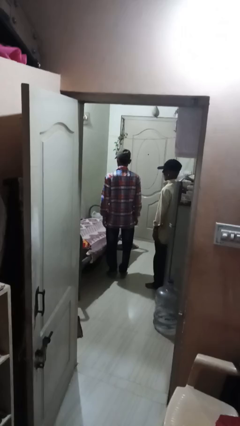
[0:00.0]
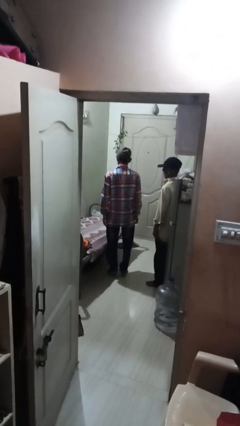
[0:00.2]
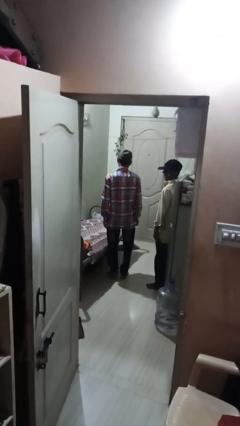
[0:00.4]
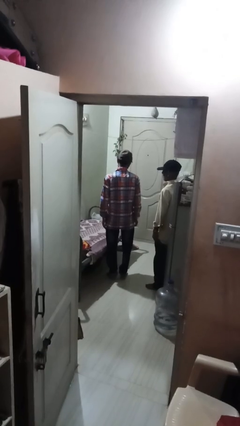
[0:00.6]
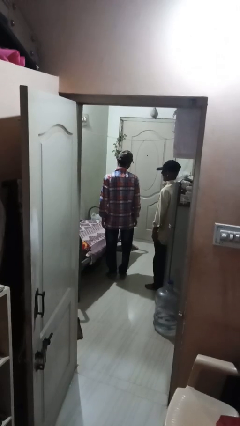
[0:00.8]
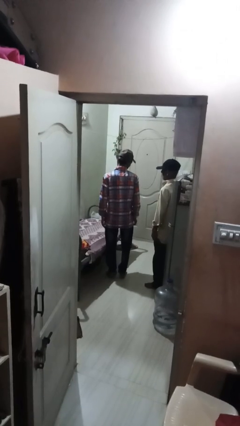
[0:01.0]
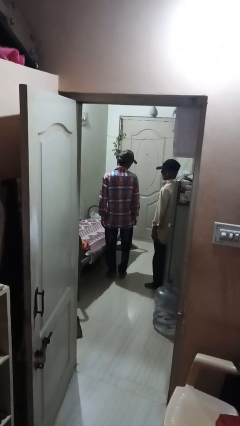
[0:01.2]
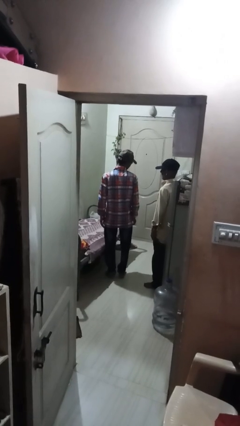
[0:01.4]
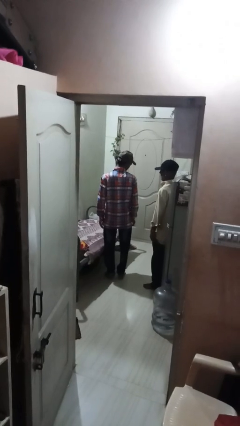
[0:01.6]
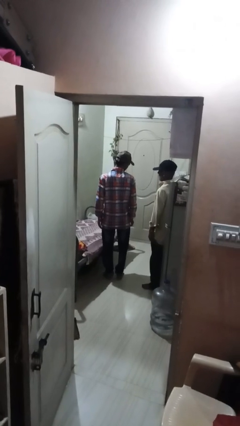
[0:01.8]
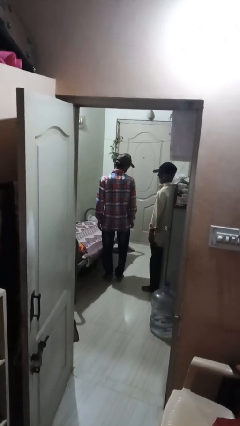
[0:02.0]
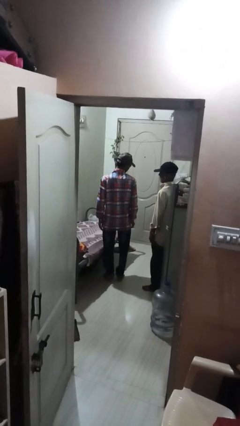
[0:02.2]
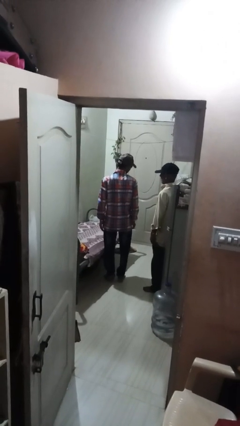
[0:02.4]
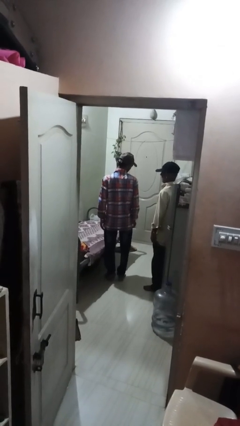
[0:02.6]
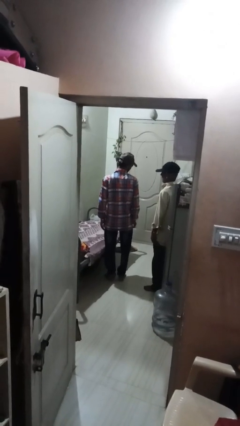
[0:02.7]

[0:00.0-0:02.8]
person looks over shoulder

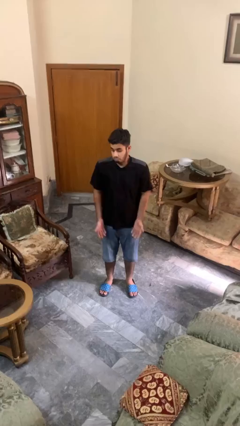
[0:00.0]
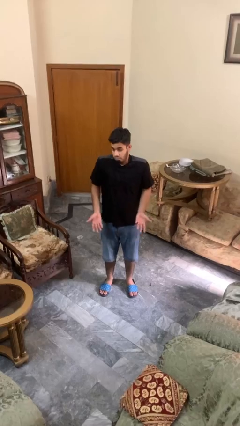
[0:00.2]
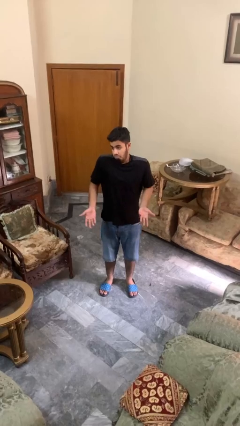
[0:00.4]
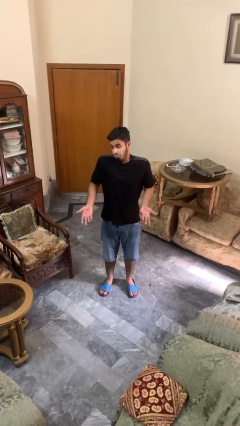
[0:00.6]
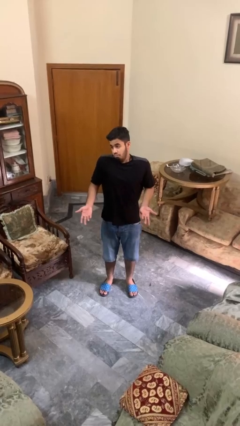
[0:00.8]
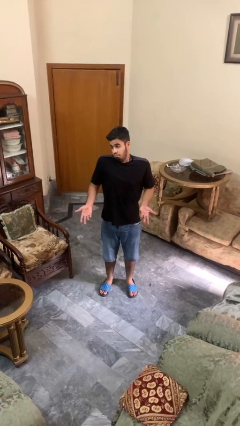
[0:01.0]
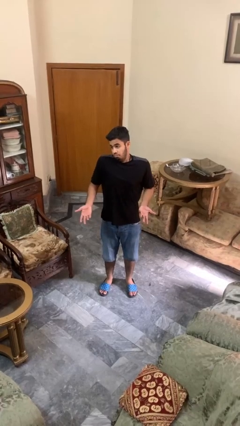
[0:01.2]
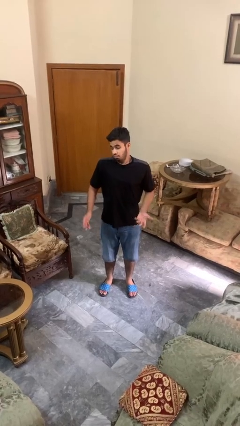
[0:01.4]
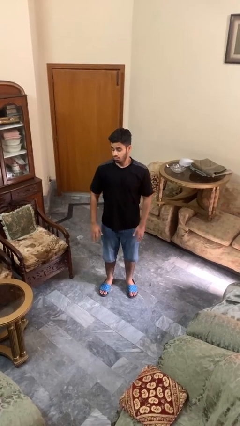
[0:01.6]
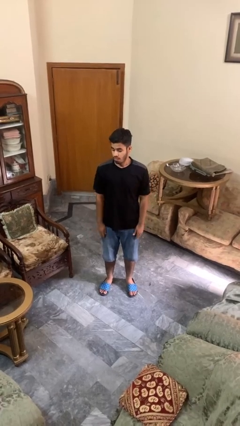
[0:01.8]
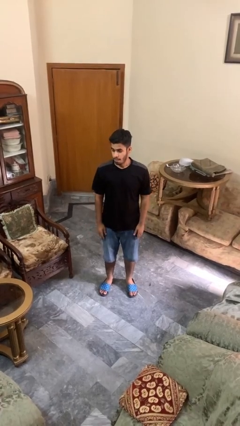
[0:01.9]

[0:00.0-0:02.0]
person shrugs

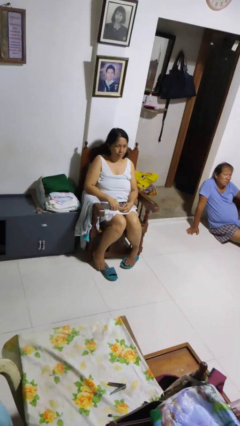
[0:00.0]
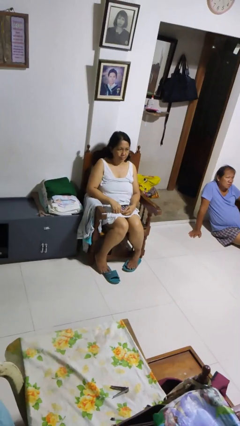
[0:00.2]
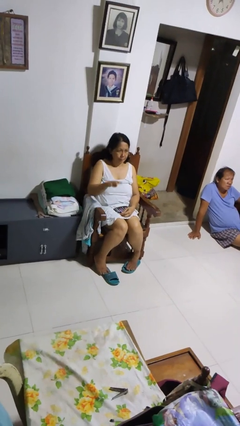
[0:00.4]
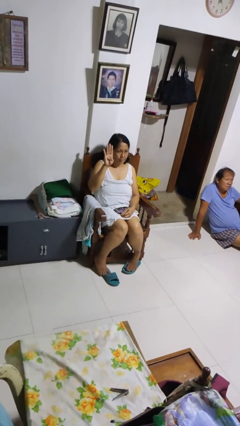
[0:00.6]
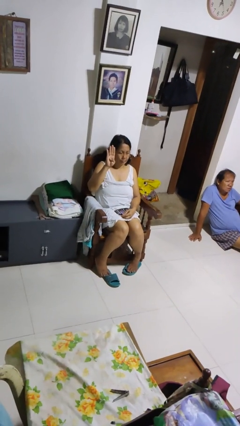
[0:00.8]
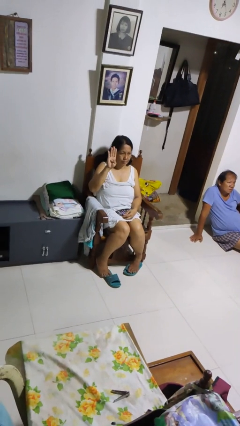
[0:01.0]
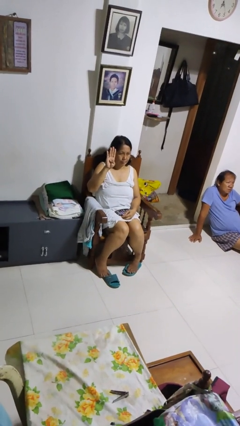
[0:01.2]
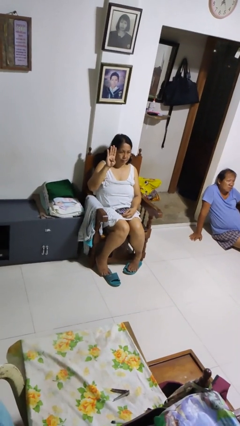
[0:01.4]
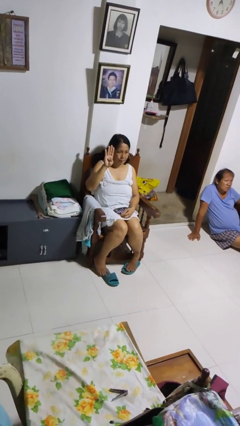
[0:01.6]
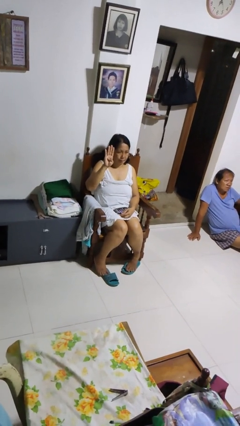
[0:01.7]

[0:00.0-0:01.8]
person gestures number four

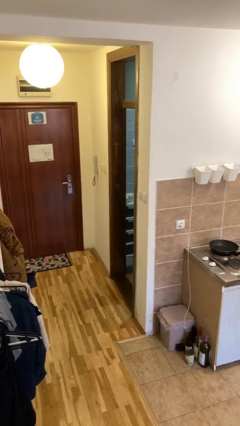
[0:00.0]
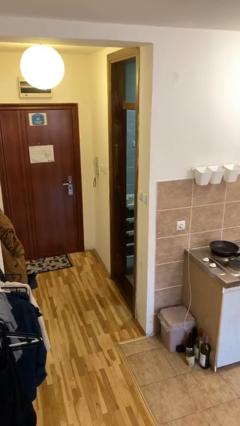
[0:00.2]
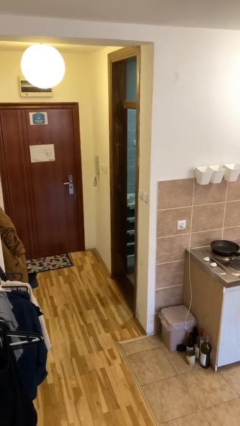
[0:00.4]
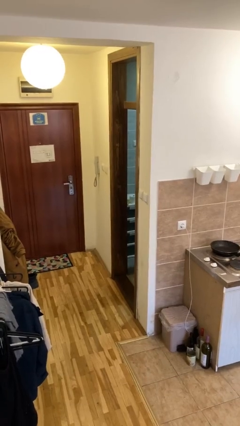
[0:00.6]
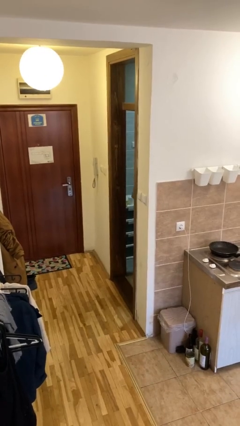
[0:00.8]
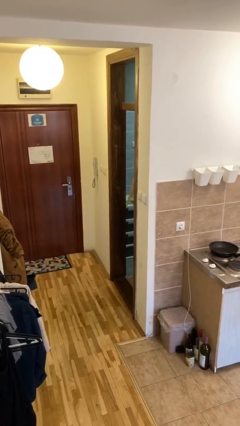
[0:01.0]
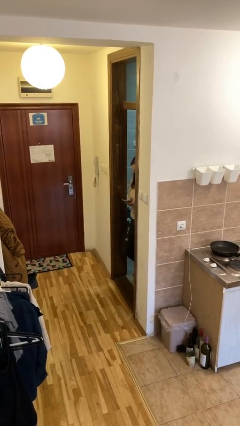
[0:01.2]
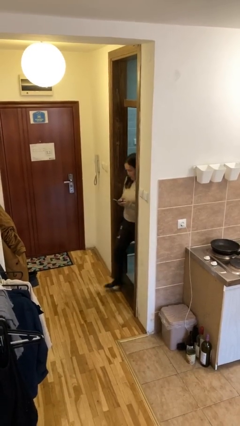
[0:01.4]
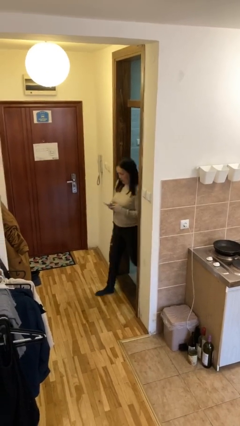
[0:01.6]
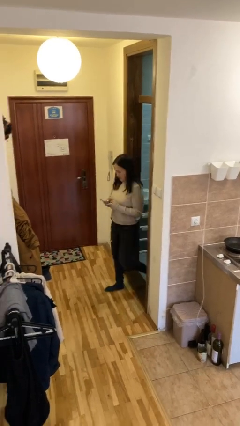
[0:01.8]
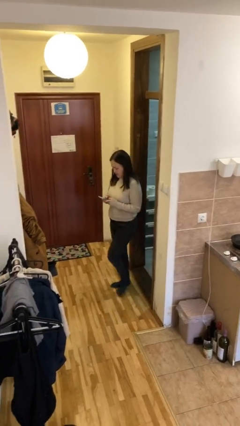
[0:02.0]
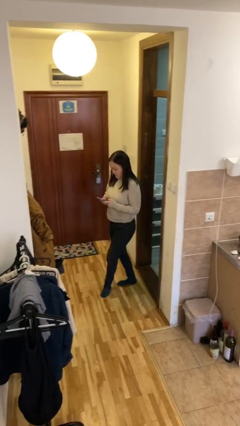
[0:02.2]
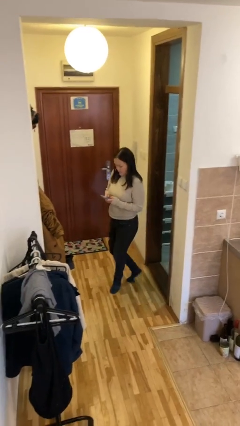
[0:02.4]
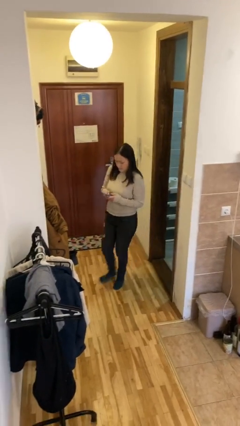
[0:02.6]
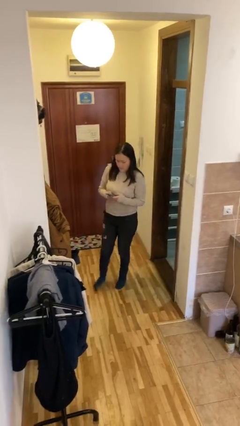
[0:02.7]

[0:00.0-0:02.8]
person enters scene through structure

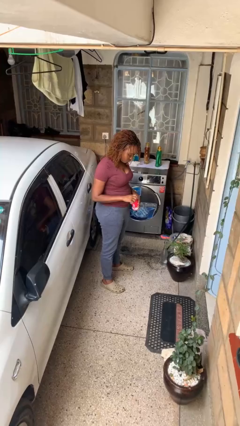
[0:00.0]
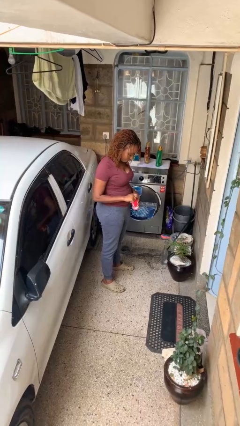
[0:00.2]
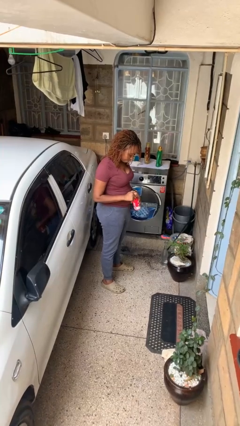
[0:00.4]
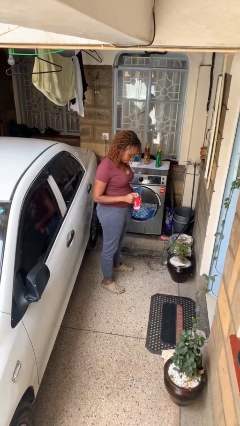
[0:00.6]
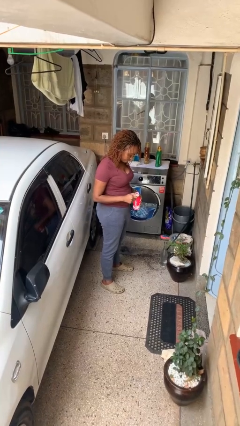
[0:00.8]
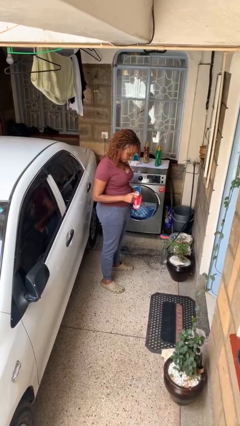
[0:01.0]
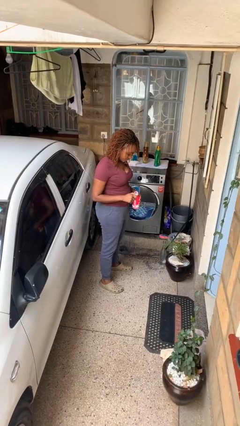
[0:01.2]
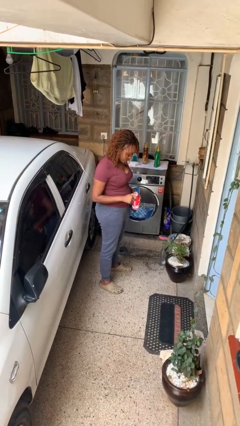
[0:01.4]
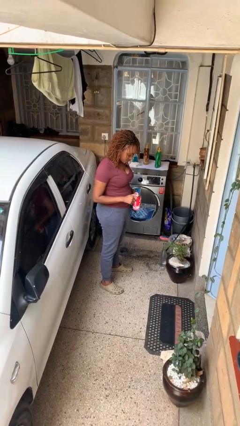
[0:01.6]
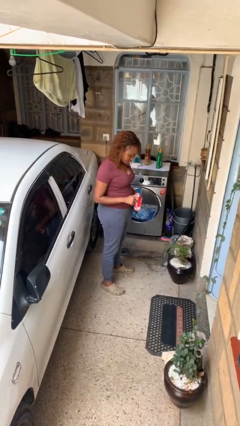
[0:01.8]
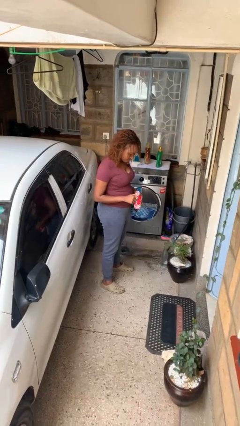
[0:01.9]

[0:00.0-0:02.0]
person opens beverage can

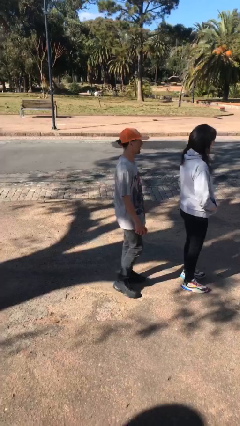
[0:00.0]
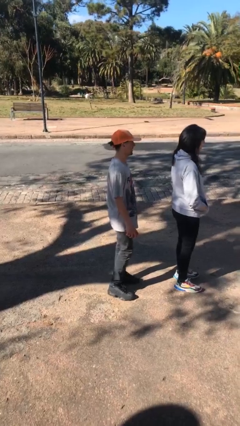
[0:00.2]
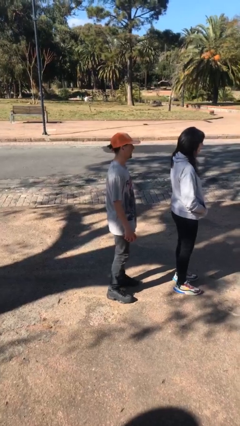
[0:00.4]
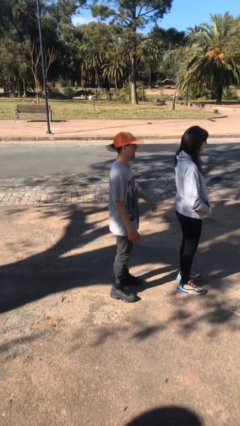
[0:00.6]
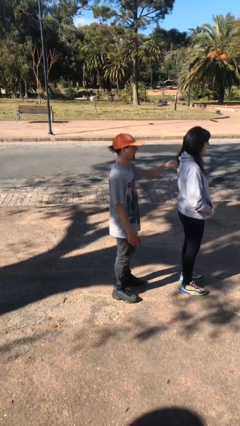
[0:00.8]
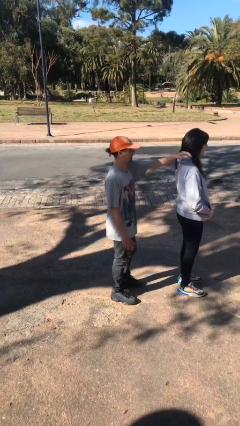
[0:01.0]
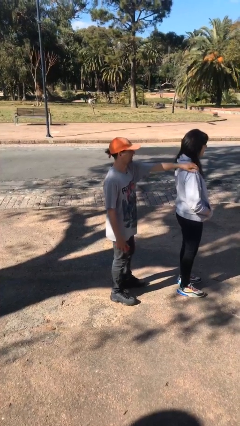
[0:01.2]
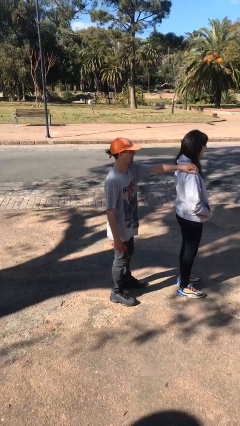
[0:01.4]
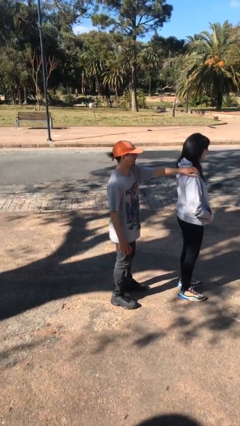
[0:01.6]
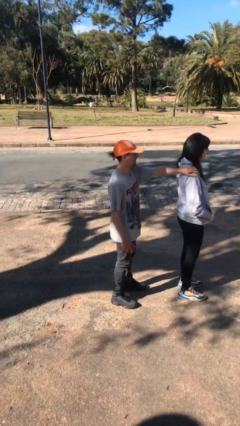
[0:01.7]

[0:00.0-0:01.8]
person grabs person by shoulder

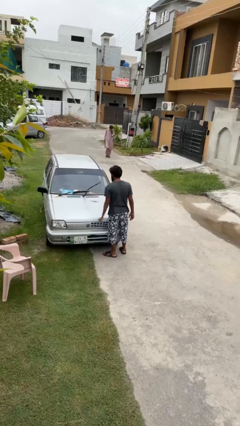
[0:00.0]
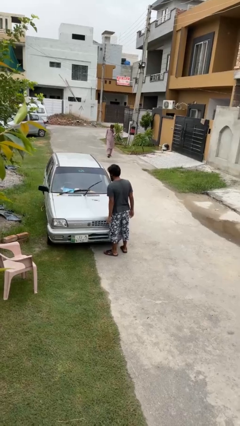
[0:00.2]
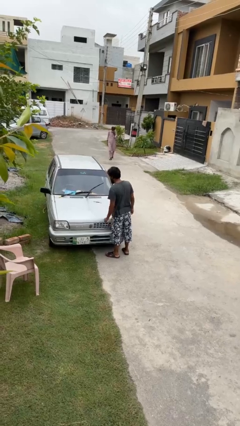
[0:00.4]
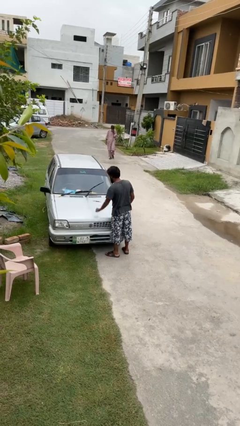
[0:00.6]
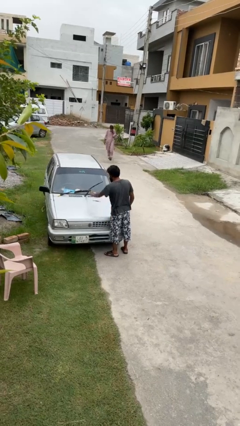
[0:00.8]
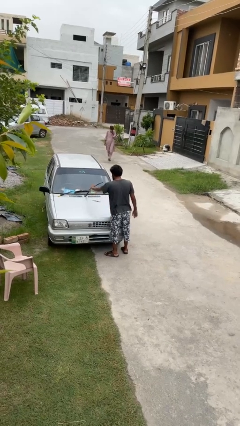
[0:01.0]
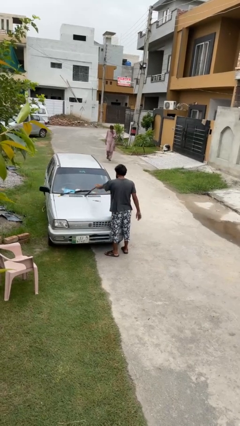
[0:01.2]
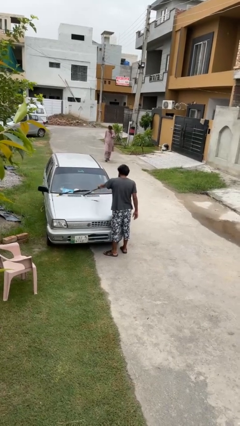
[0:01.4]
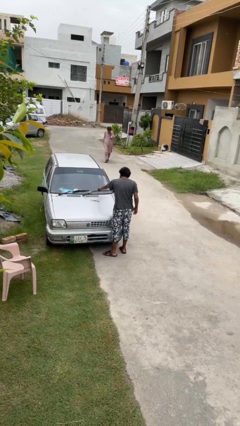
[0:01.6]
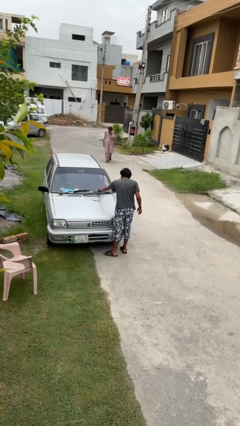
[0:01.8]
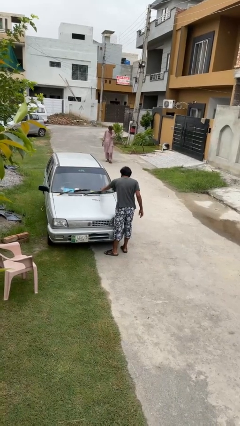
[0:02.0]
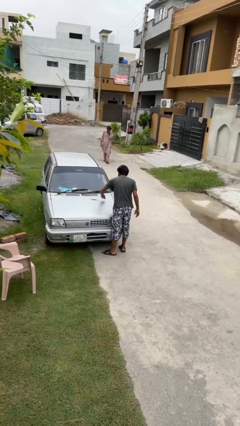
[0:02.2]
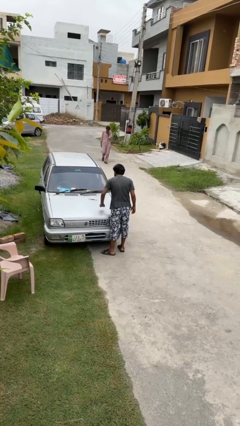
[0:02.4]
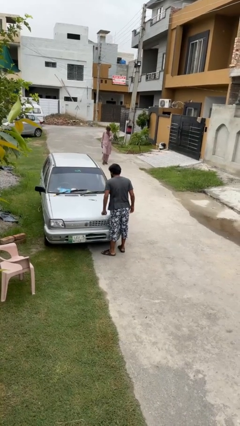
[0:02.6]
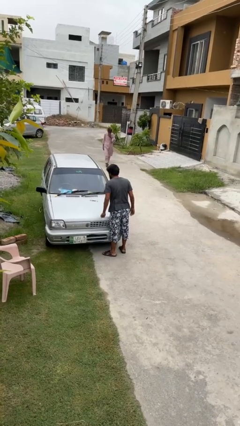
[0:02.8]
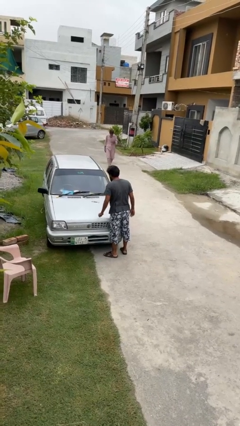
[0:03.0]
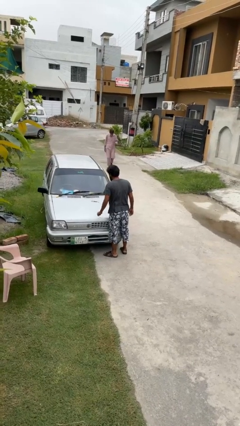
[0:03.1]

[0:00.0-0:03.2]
person flips down car wipers

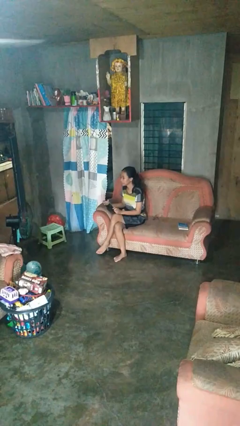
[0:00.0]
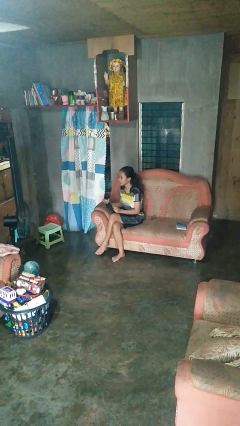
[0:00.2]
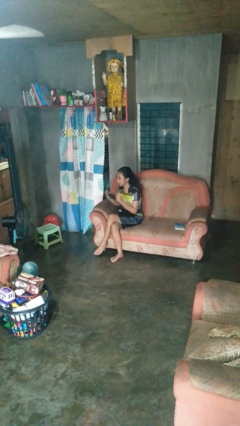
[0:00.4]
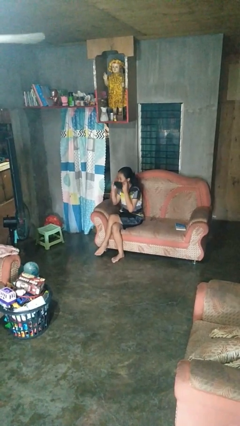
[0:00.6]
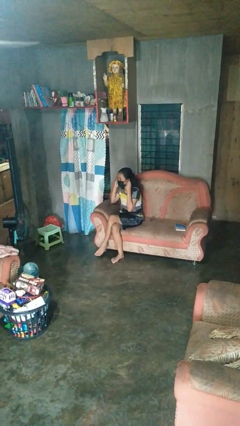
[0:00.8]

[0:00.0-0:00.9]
person puts on facemask
